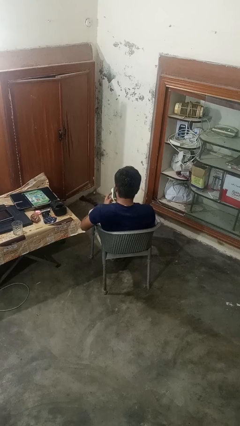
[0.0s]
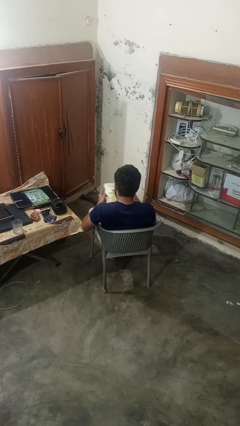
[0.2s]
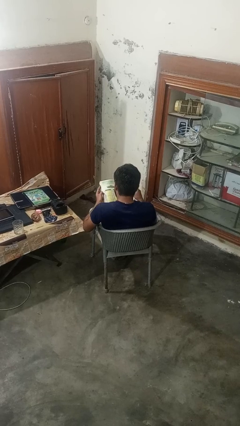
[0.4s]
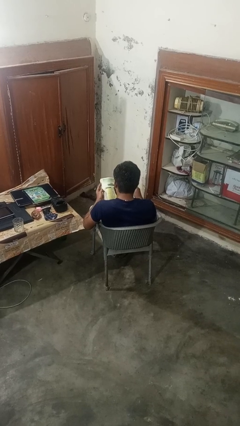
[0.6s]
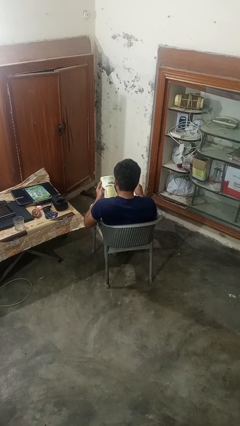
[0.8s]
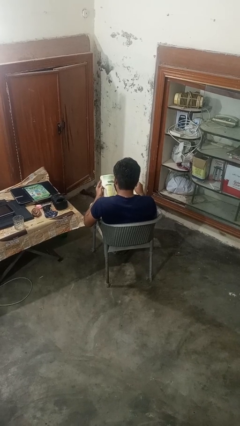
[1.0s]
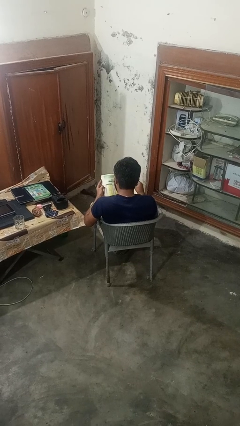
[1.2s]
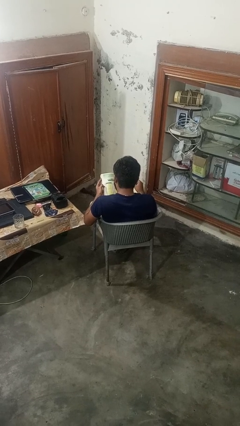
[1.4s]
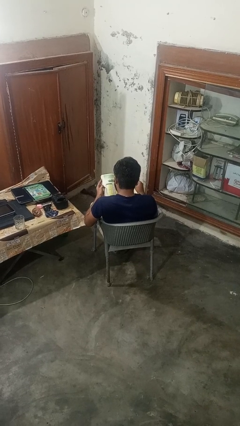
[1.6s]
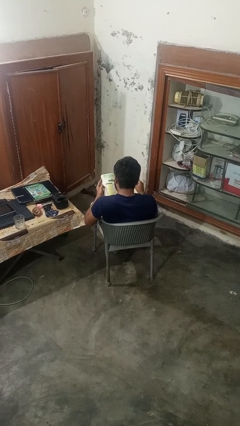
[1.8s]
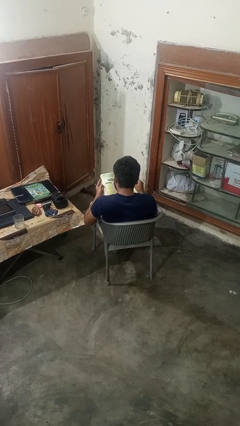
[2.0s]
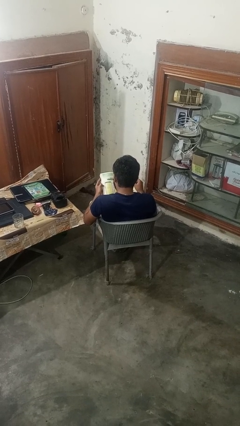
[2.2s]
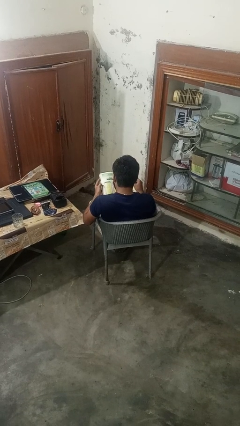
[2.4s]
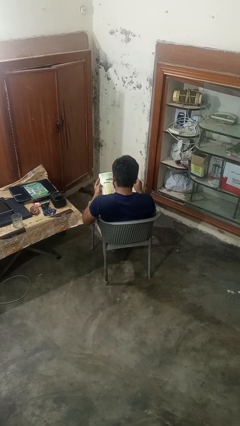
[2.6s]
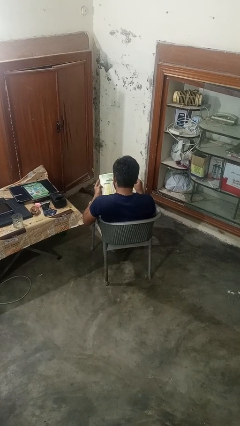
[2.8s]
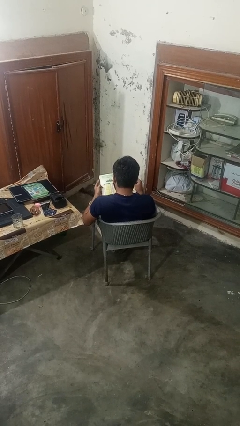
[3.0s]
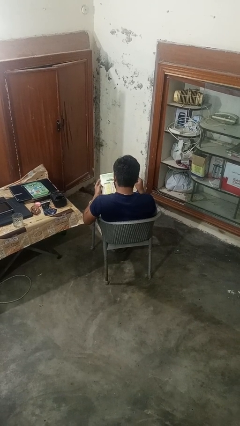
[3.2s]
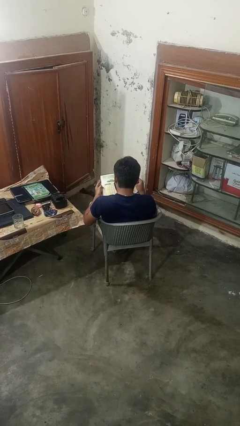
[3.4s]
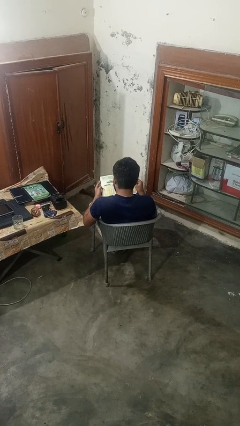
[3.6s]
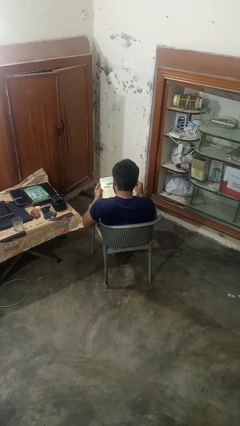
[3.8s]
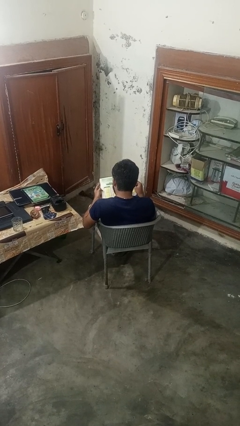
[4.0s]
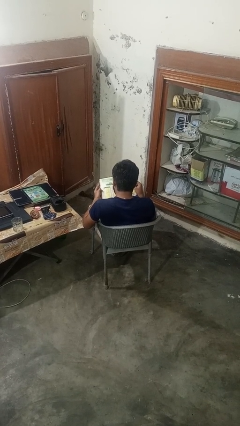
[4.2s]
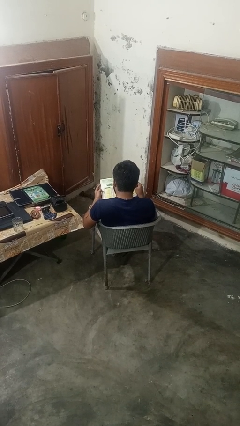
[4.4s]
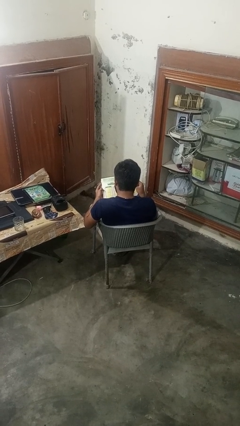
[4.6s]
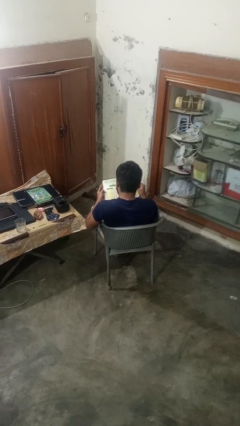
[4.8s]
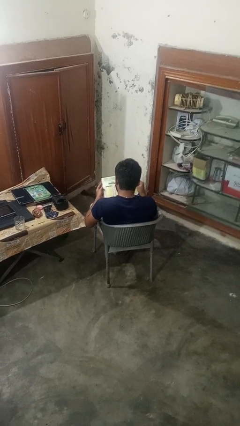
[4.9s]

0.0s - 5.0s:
person reads book

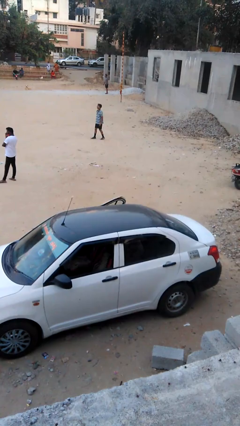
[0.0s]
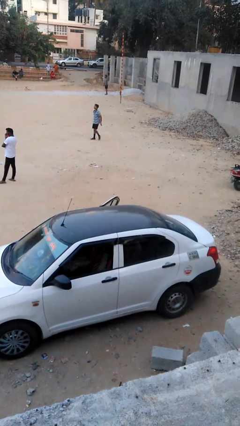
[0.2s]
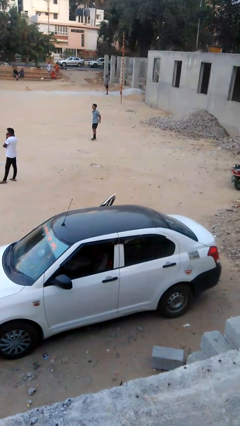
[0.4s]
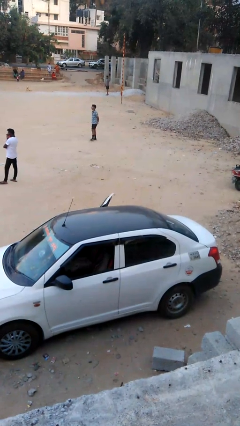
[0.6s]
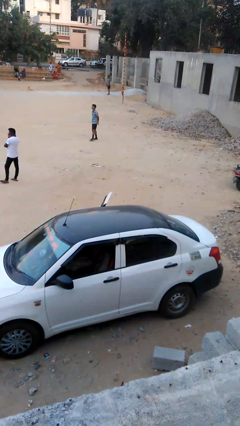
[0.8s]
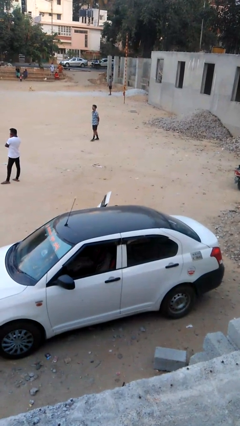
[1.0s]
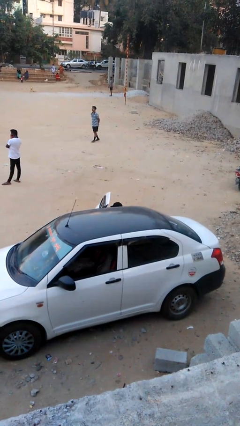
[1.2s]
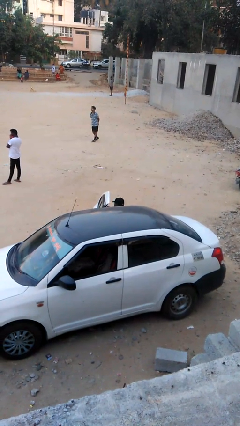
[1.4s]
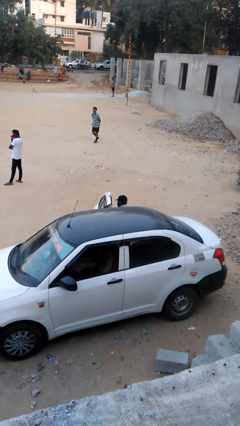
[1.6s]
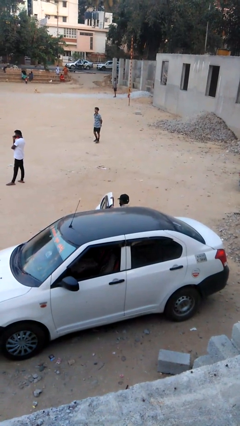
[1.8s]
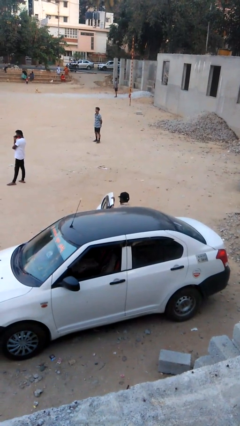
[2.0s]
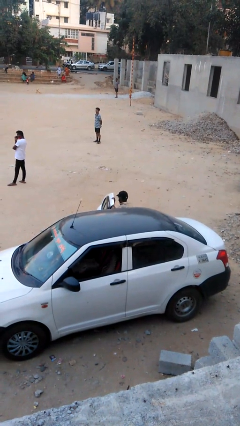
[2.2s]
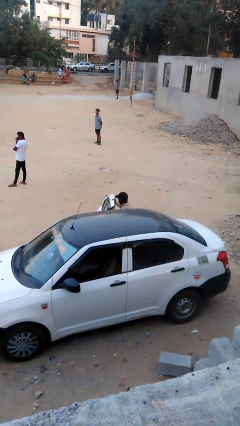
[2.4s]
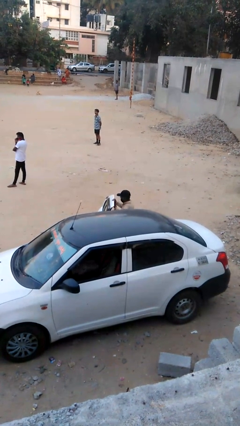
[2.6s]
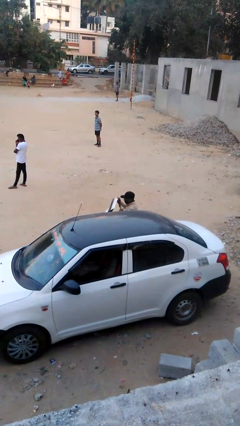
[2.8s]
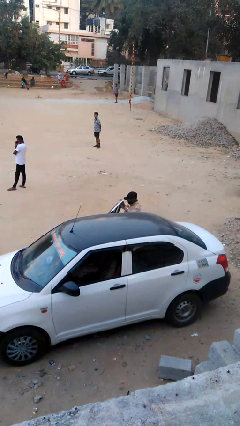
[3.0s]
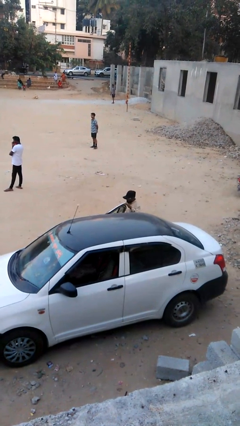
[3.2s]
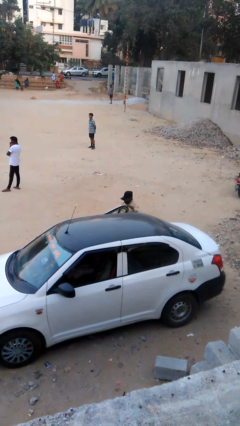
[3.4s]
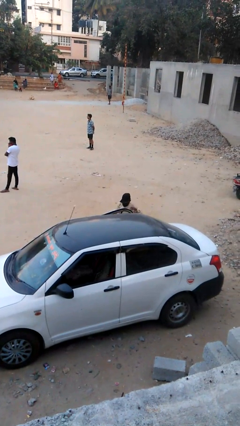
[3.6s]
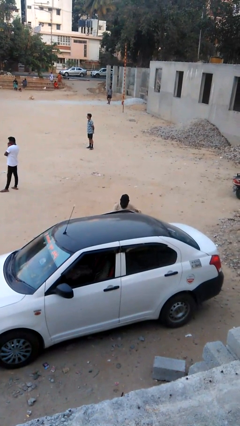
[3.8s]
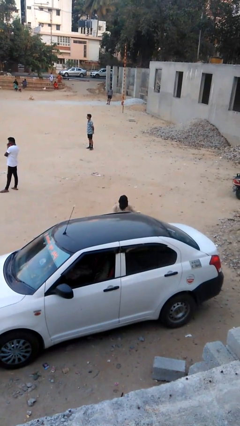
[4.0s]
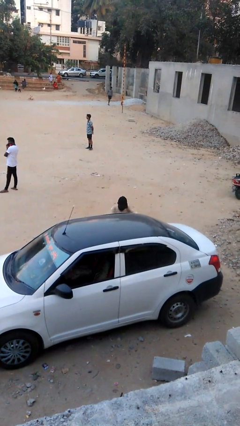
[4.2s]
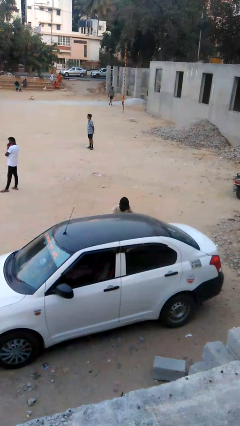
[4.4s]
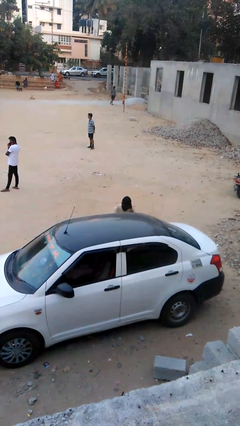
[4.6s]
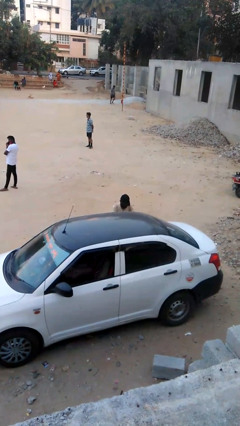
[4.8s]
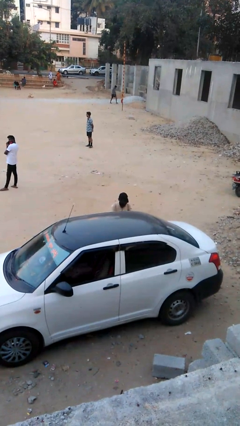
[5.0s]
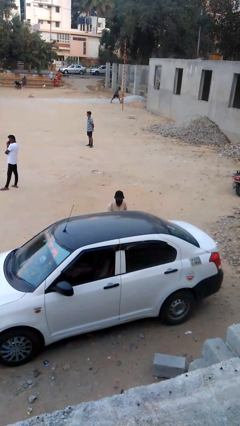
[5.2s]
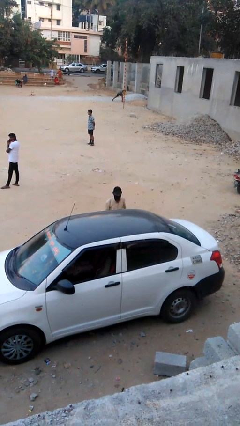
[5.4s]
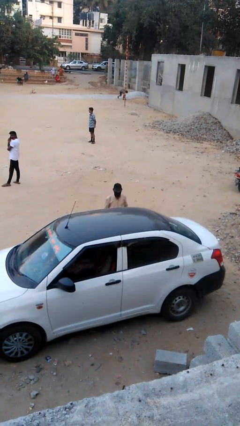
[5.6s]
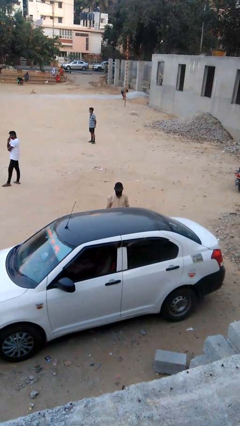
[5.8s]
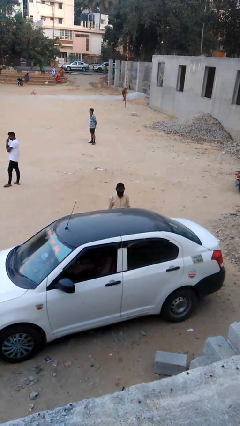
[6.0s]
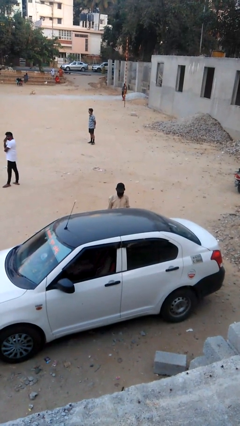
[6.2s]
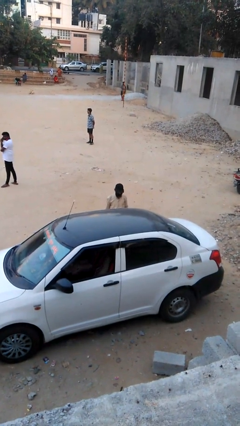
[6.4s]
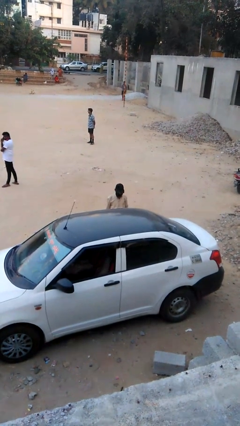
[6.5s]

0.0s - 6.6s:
person exits car

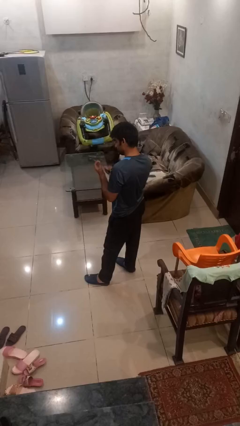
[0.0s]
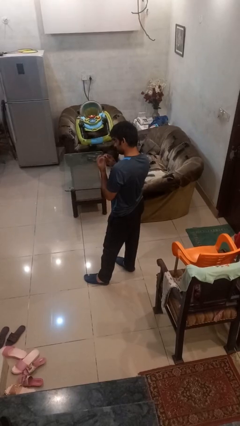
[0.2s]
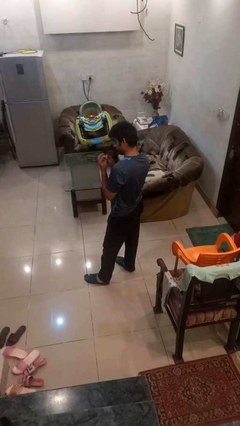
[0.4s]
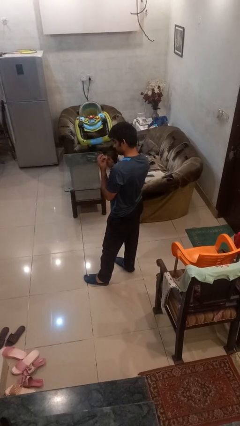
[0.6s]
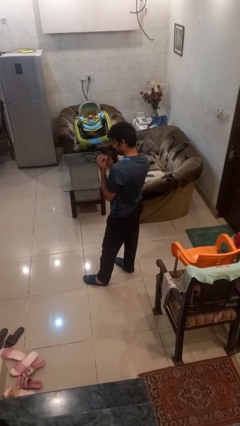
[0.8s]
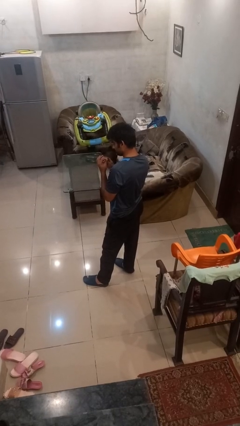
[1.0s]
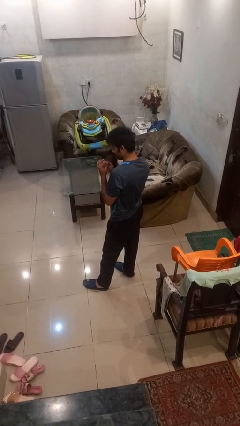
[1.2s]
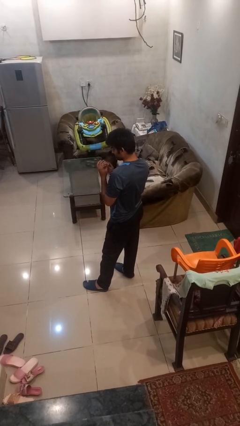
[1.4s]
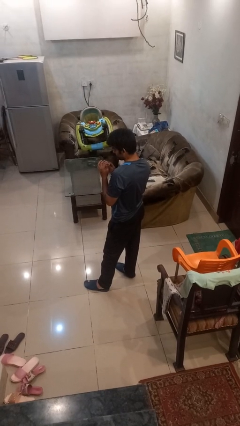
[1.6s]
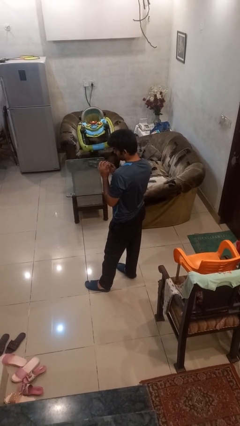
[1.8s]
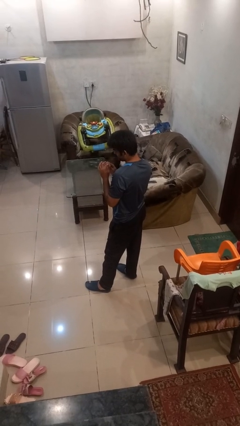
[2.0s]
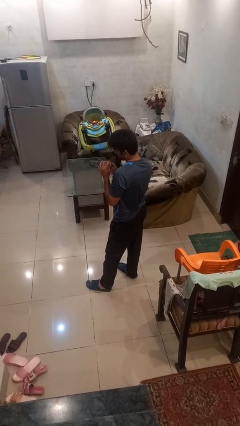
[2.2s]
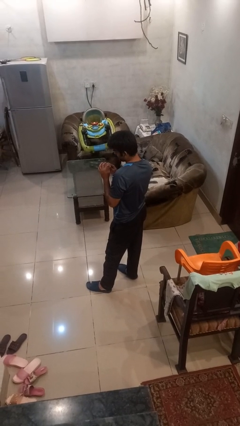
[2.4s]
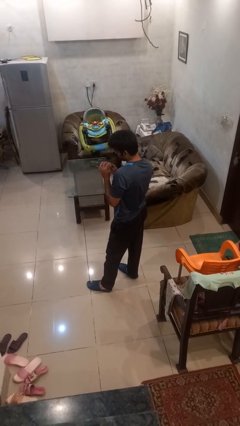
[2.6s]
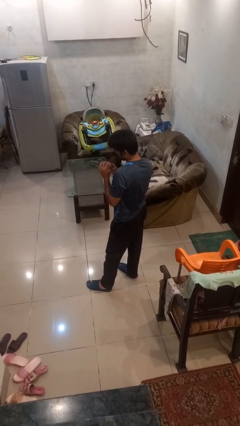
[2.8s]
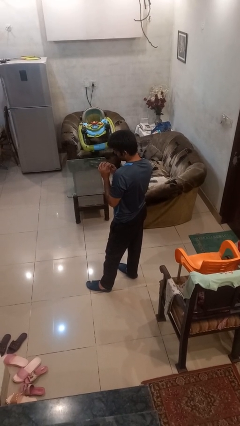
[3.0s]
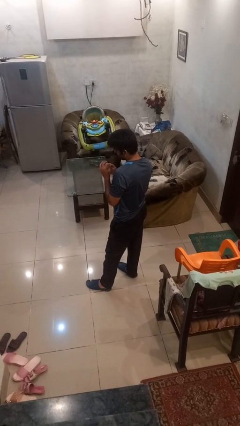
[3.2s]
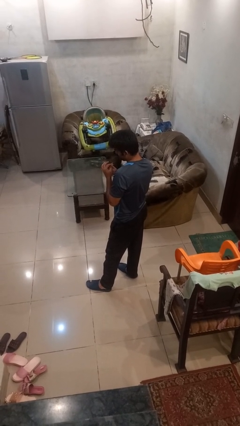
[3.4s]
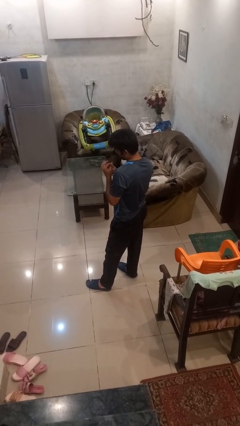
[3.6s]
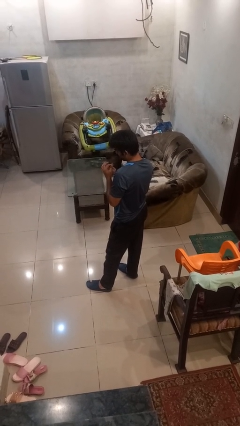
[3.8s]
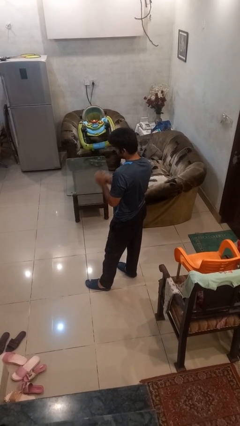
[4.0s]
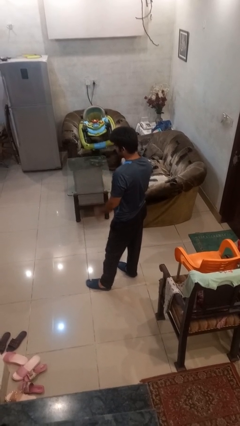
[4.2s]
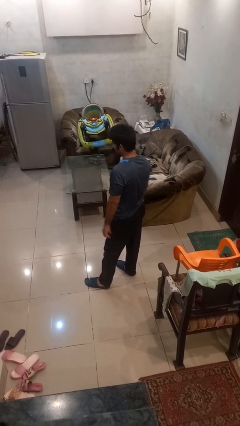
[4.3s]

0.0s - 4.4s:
person files fingernails

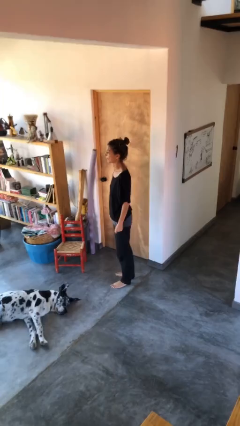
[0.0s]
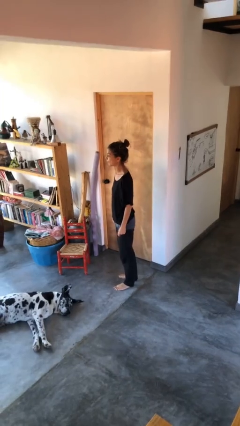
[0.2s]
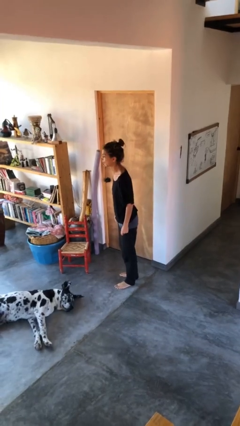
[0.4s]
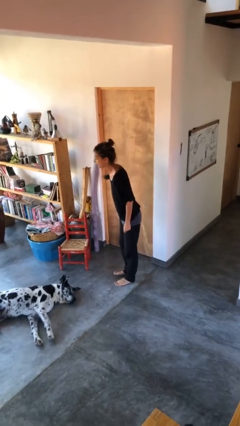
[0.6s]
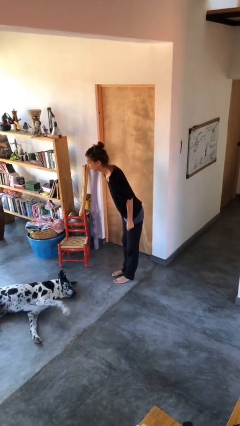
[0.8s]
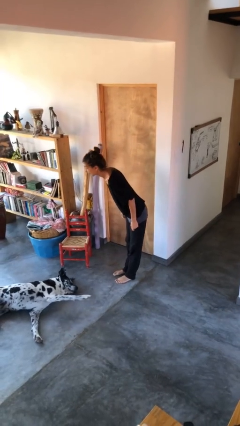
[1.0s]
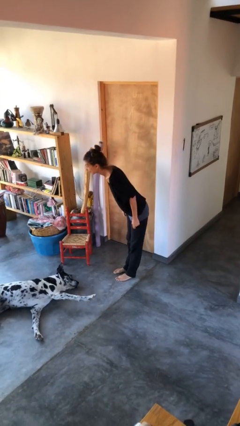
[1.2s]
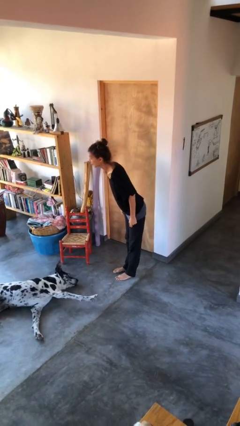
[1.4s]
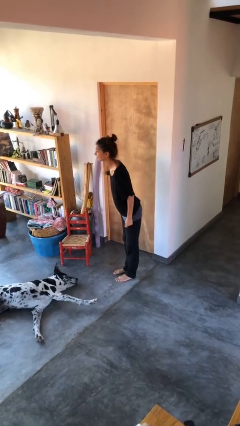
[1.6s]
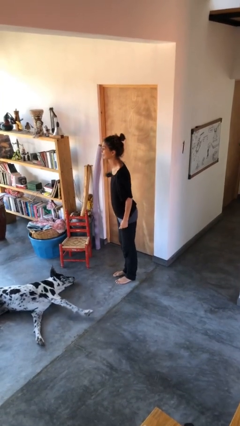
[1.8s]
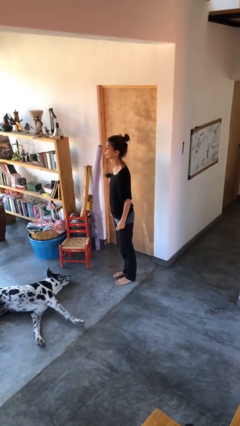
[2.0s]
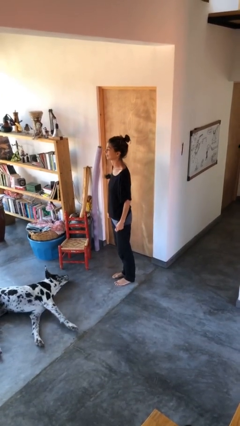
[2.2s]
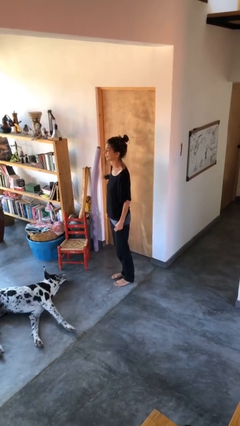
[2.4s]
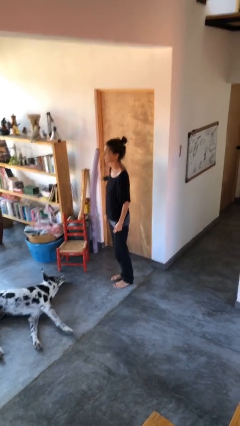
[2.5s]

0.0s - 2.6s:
person bows
